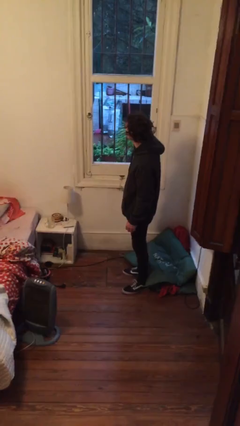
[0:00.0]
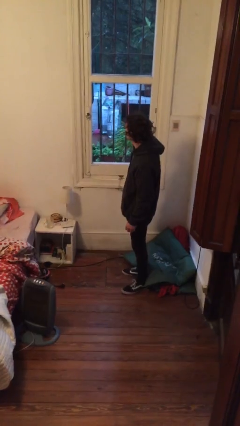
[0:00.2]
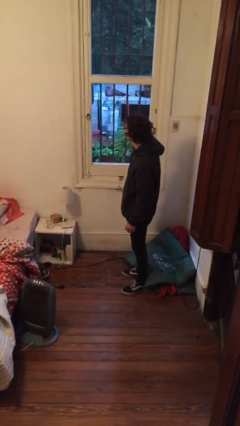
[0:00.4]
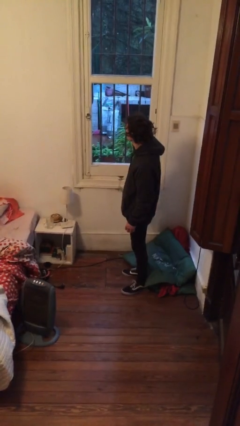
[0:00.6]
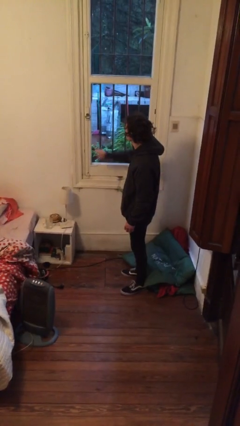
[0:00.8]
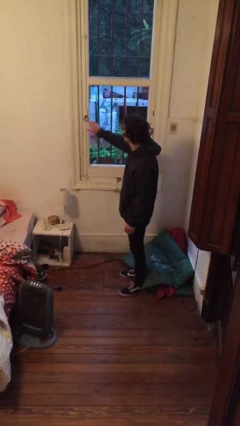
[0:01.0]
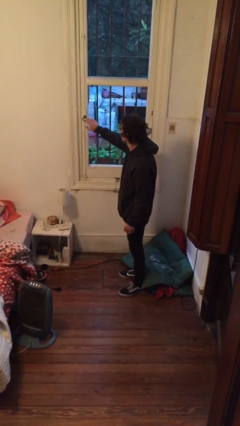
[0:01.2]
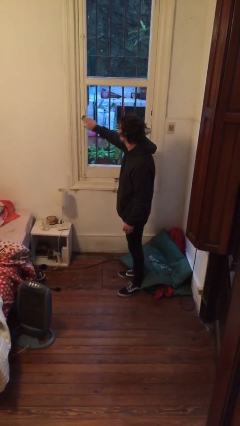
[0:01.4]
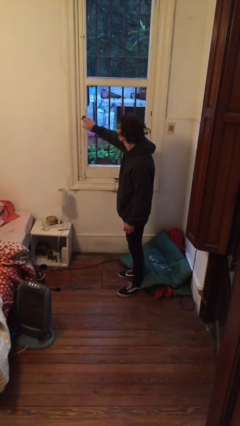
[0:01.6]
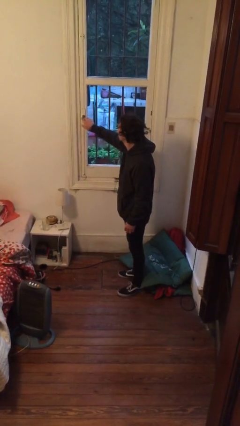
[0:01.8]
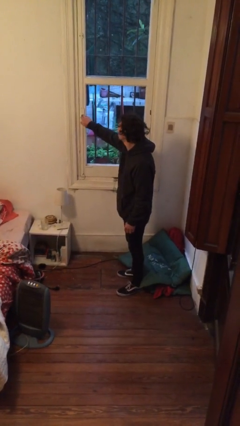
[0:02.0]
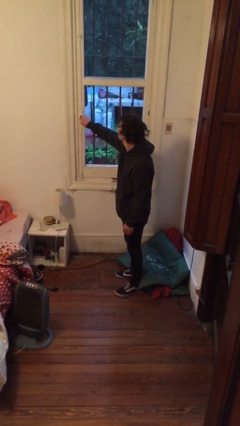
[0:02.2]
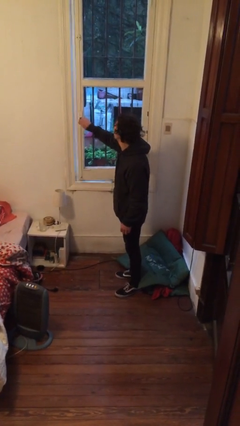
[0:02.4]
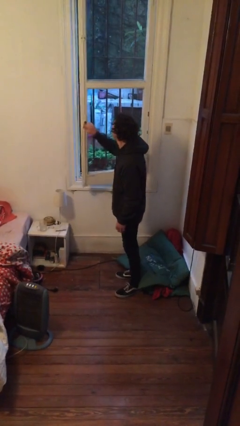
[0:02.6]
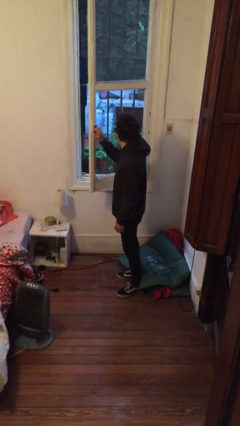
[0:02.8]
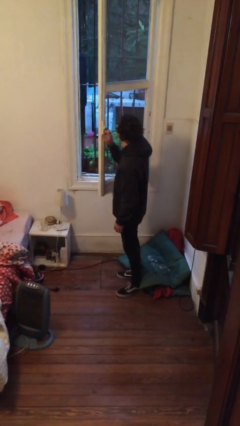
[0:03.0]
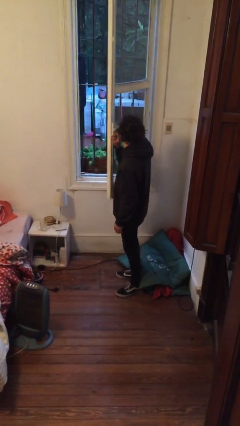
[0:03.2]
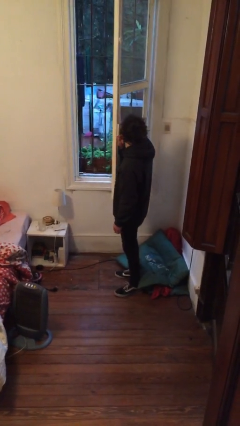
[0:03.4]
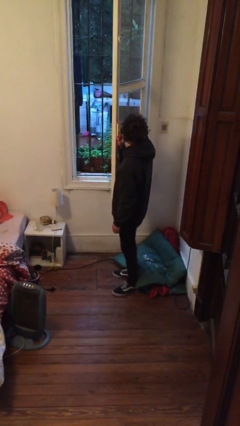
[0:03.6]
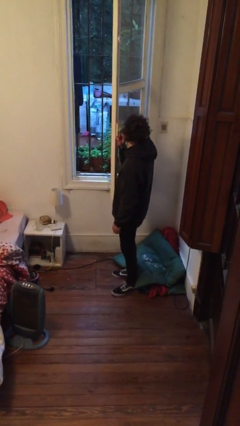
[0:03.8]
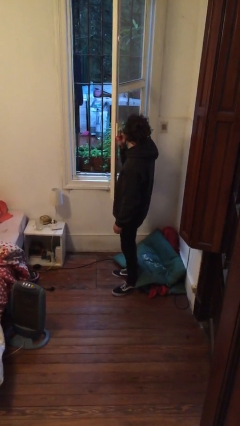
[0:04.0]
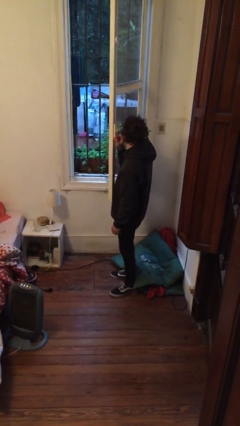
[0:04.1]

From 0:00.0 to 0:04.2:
person opens home window

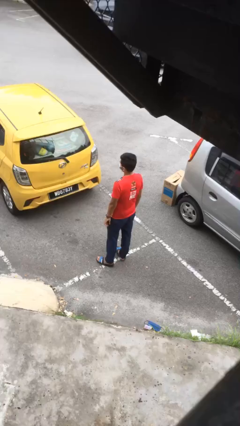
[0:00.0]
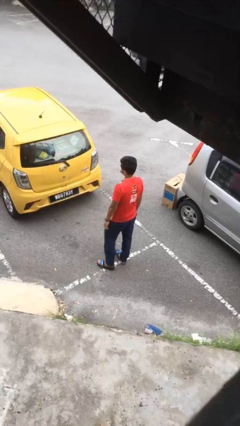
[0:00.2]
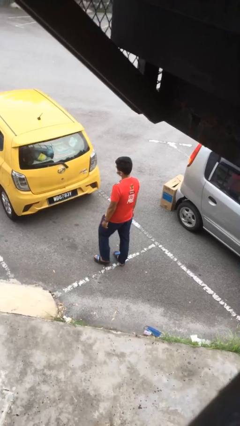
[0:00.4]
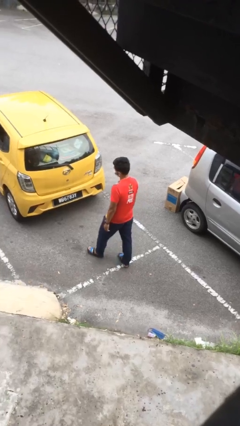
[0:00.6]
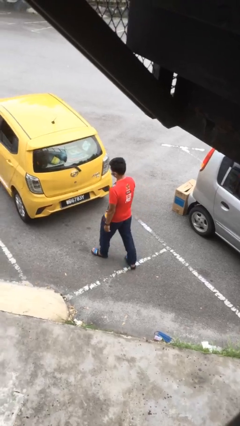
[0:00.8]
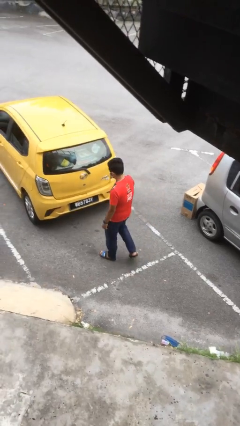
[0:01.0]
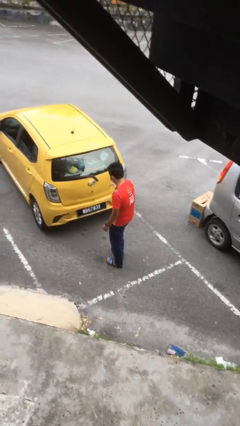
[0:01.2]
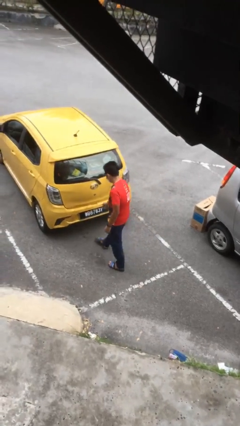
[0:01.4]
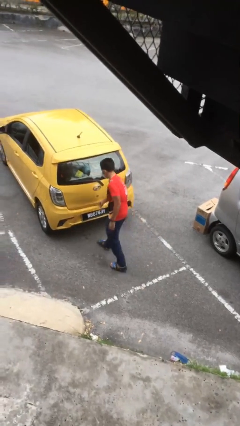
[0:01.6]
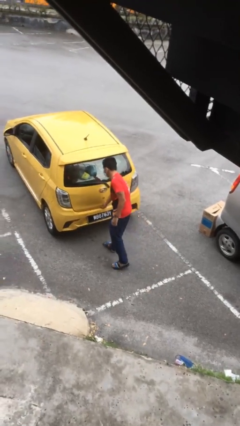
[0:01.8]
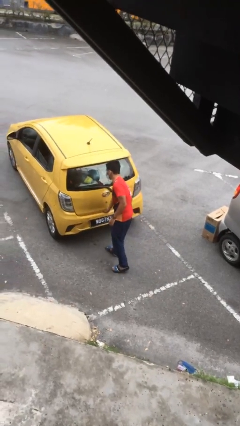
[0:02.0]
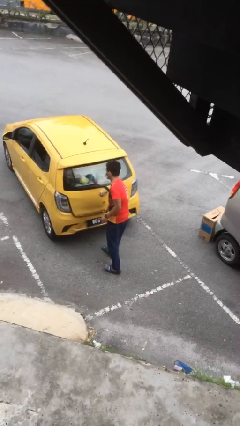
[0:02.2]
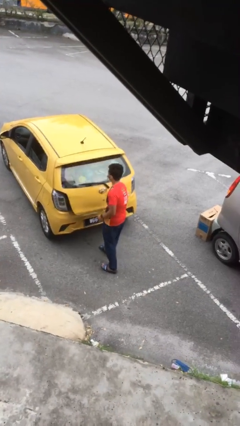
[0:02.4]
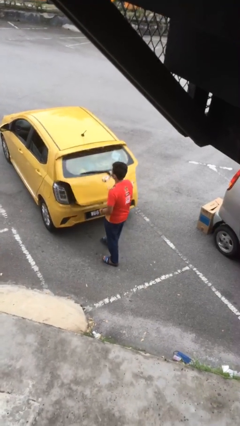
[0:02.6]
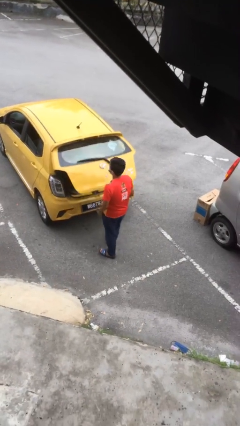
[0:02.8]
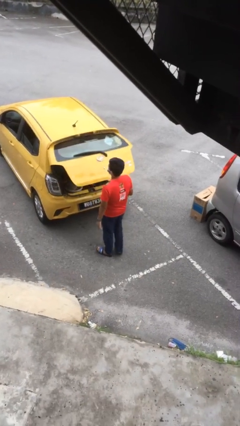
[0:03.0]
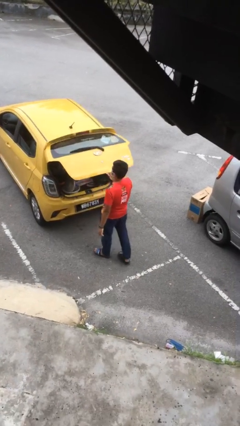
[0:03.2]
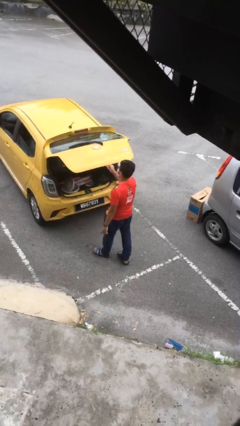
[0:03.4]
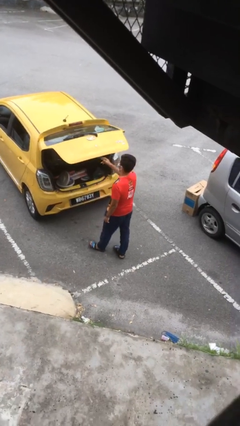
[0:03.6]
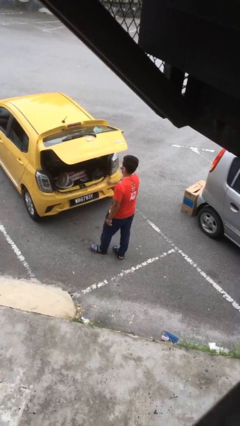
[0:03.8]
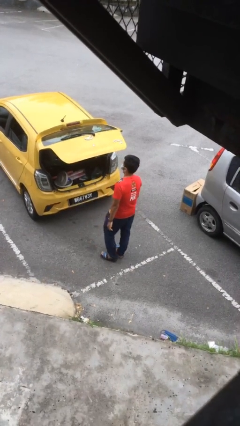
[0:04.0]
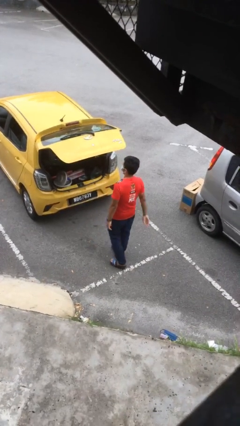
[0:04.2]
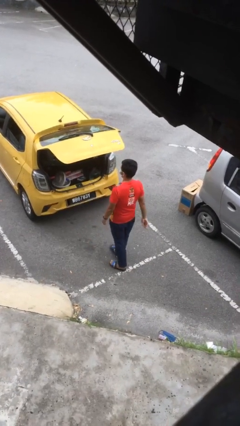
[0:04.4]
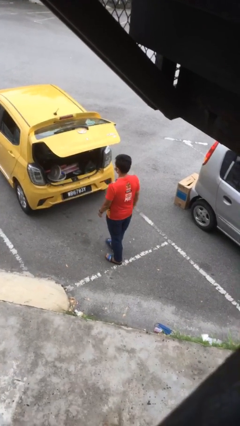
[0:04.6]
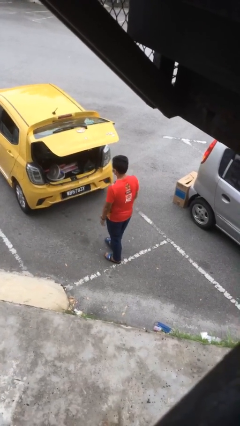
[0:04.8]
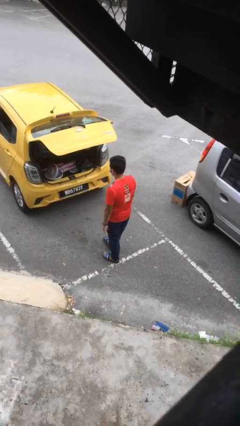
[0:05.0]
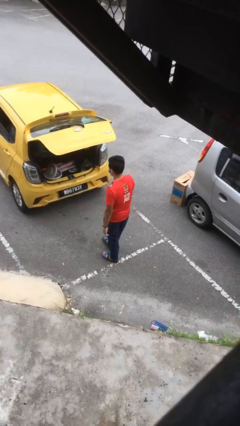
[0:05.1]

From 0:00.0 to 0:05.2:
person opens car trunk

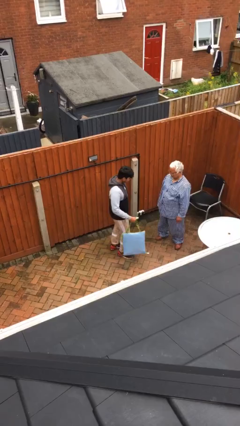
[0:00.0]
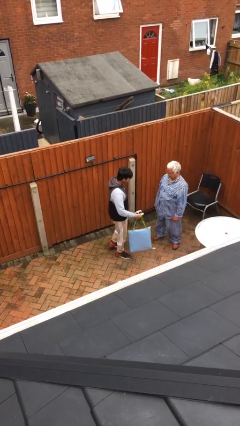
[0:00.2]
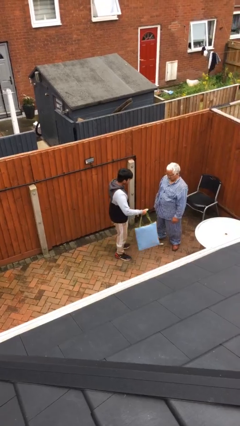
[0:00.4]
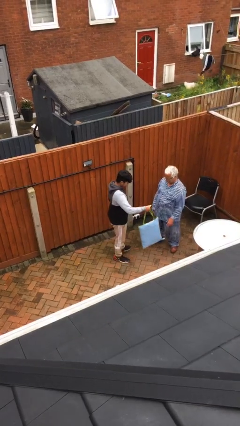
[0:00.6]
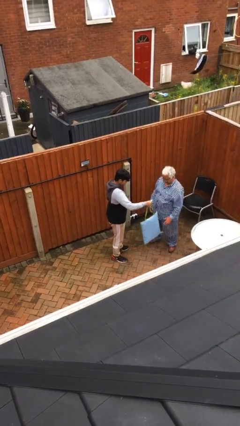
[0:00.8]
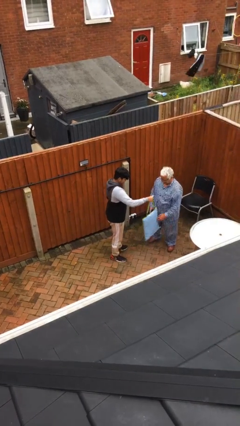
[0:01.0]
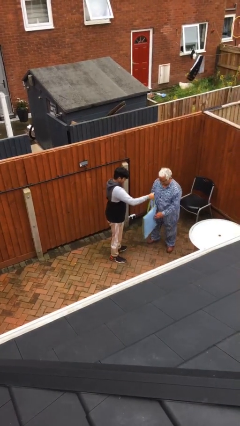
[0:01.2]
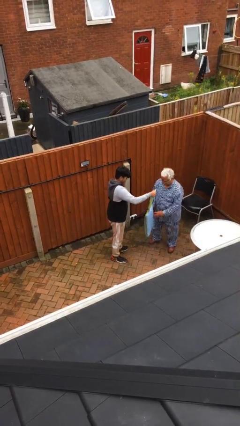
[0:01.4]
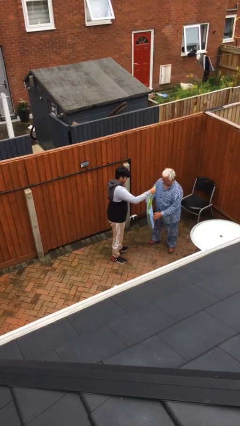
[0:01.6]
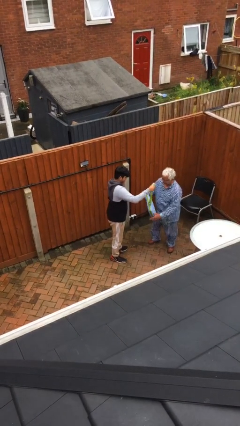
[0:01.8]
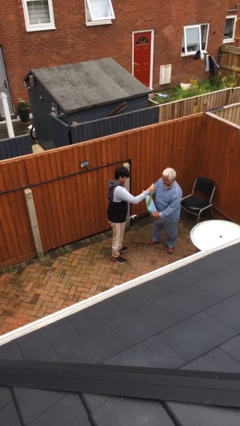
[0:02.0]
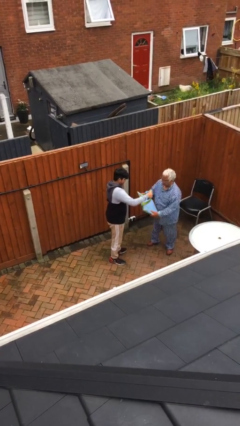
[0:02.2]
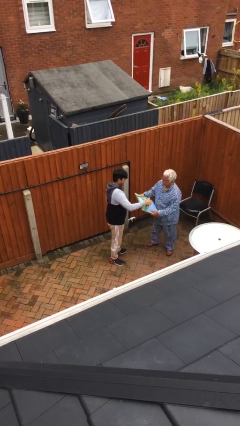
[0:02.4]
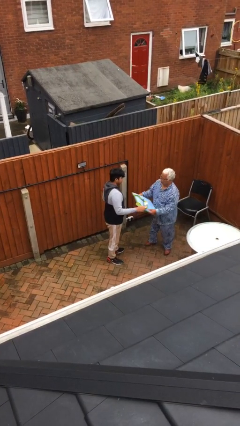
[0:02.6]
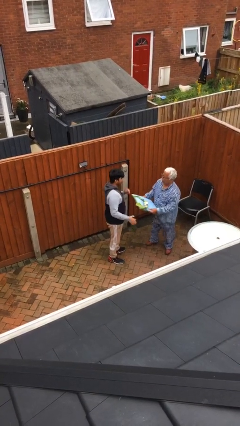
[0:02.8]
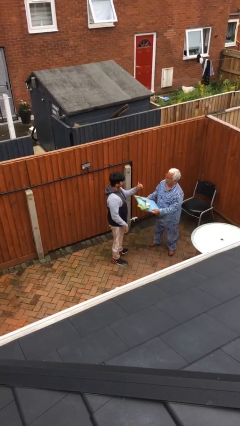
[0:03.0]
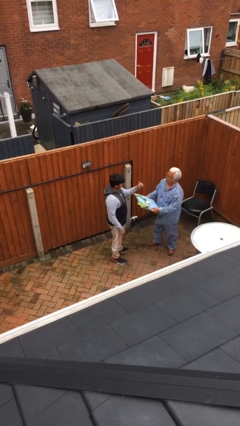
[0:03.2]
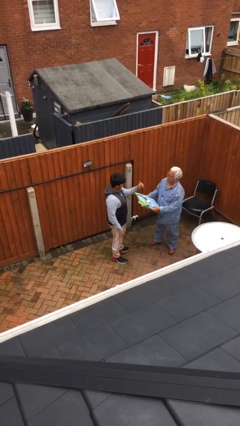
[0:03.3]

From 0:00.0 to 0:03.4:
person transfers object to person

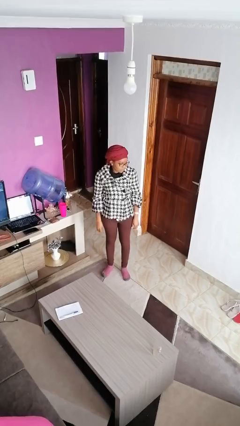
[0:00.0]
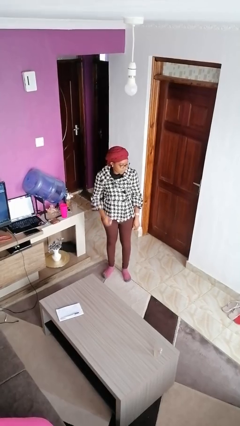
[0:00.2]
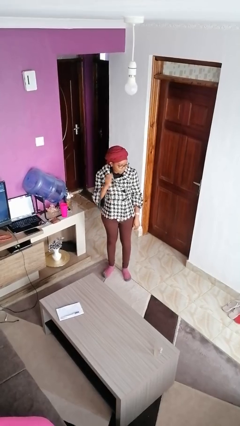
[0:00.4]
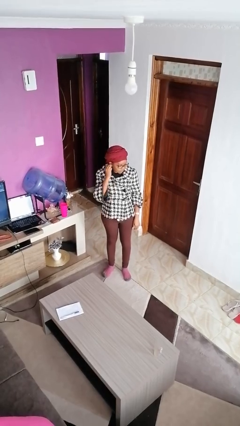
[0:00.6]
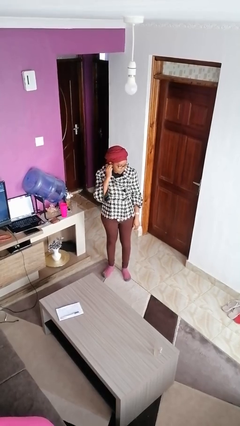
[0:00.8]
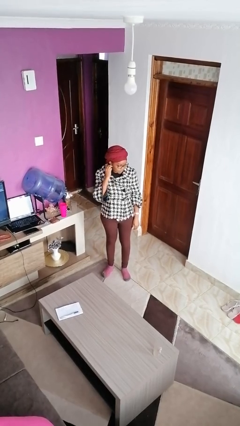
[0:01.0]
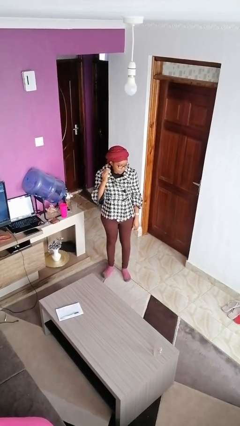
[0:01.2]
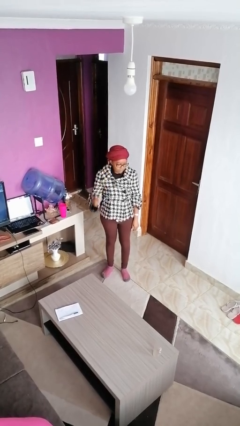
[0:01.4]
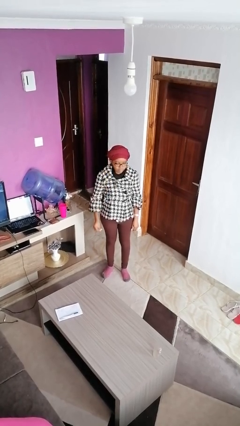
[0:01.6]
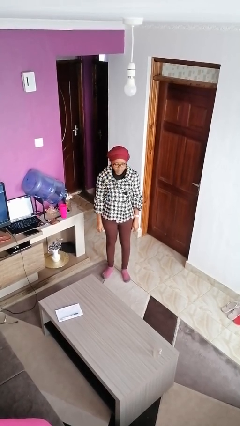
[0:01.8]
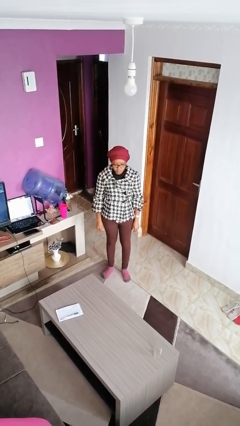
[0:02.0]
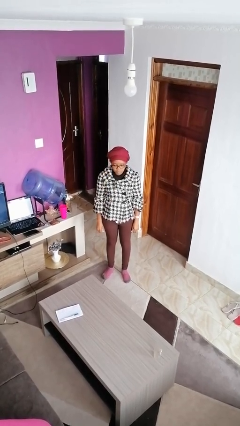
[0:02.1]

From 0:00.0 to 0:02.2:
person takes off earrings

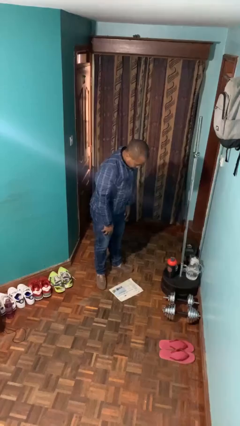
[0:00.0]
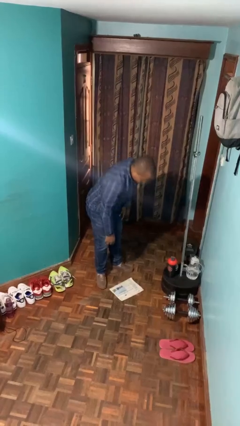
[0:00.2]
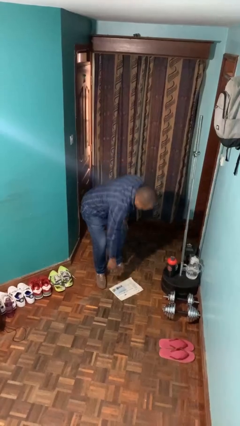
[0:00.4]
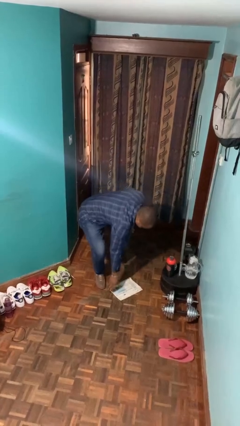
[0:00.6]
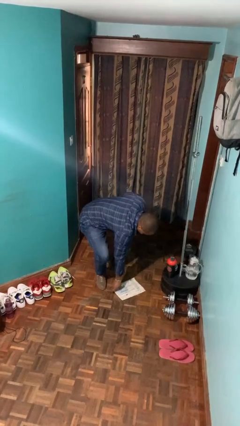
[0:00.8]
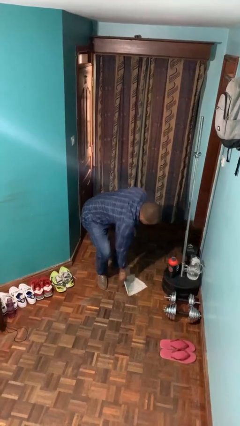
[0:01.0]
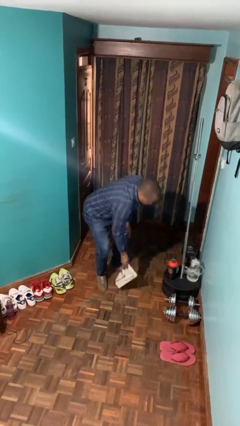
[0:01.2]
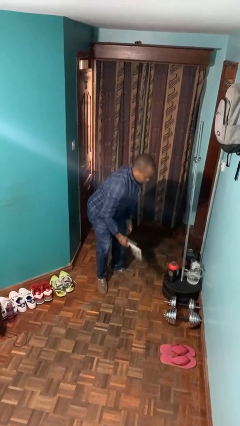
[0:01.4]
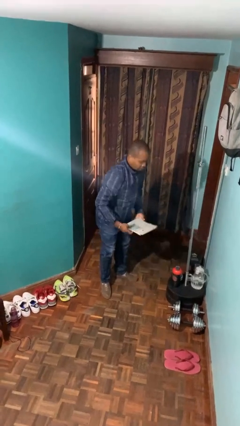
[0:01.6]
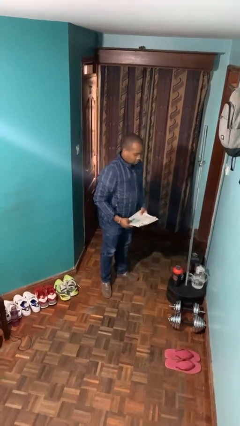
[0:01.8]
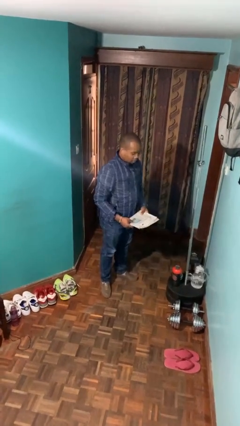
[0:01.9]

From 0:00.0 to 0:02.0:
person picks up object from floor

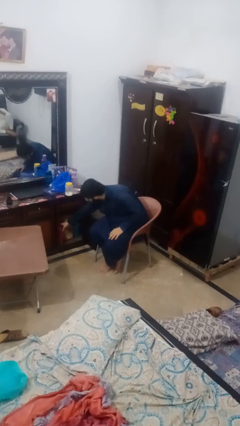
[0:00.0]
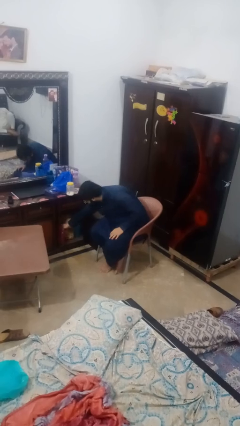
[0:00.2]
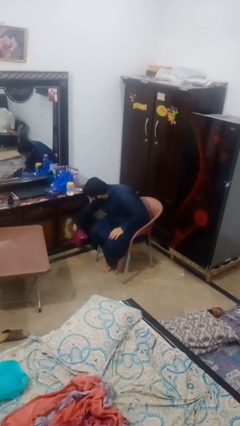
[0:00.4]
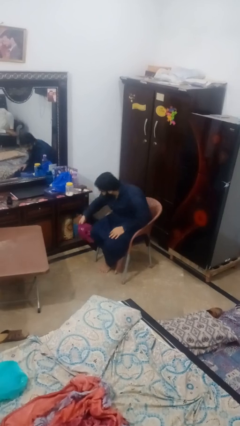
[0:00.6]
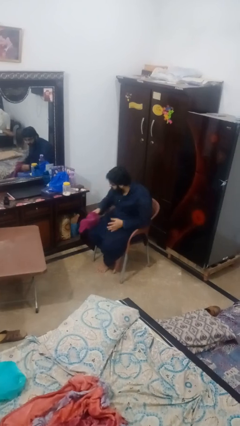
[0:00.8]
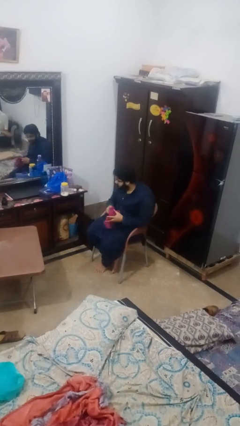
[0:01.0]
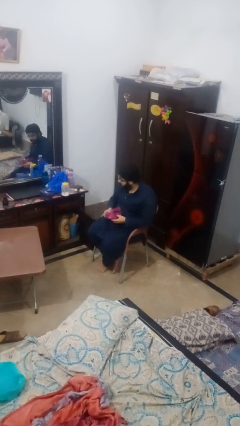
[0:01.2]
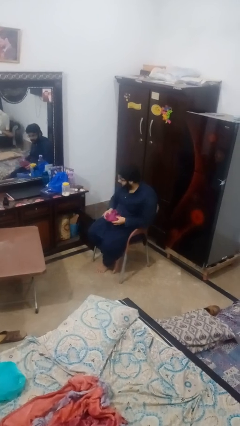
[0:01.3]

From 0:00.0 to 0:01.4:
person takes clothes from dresser
